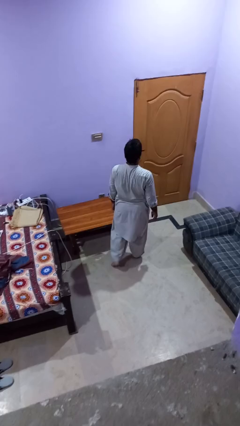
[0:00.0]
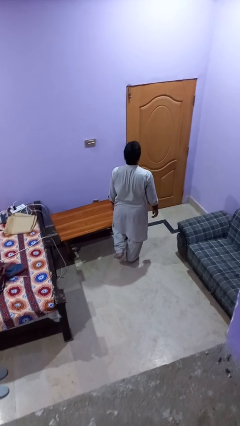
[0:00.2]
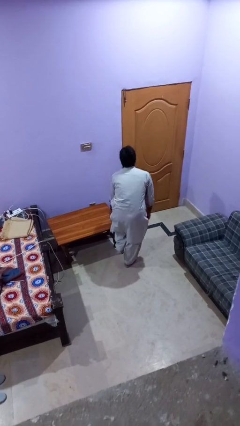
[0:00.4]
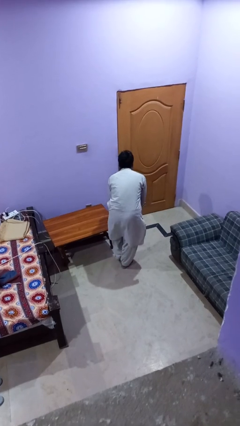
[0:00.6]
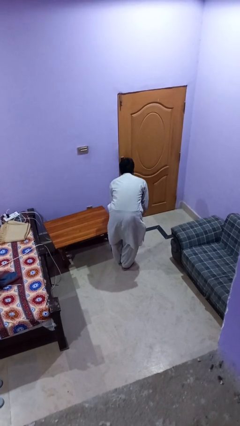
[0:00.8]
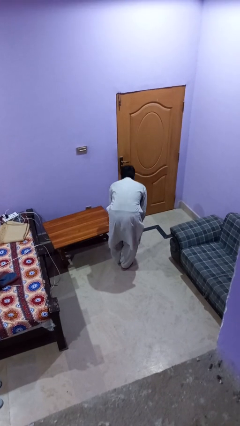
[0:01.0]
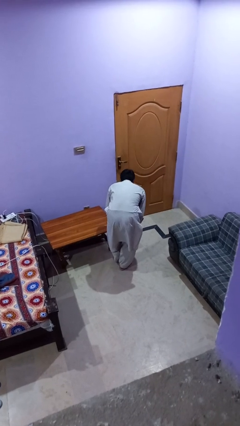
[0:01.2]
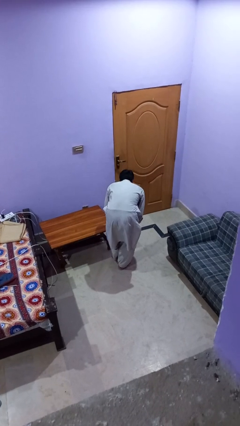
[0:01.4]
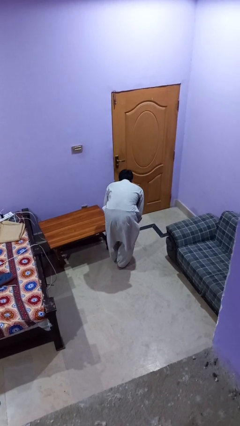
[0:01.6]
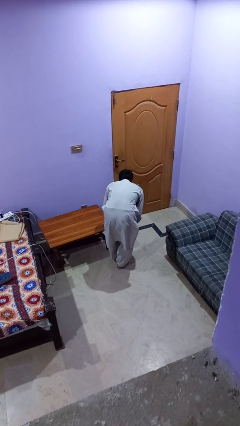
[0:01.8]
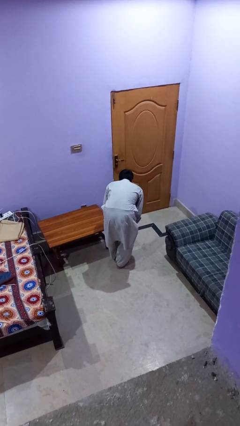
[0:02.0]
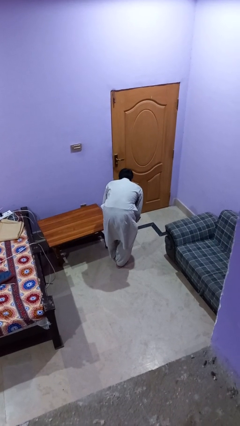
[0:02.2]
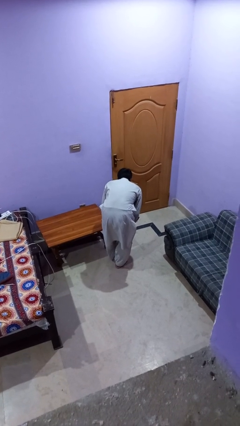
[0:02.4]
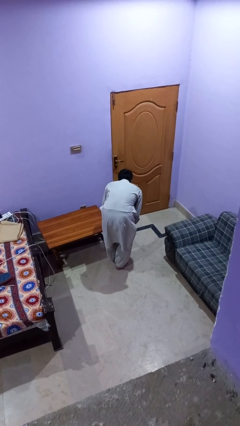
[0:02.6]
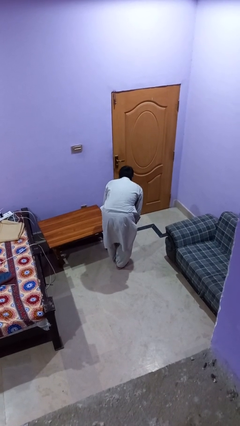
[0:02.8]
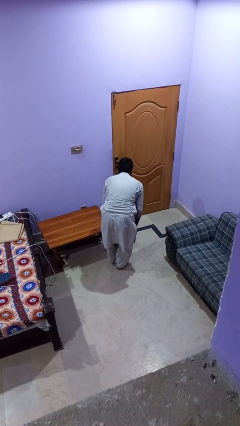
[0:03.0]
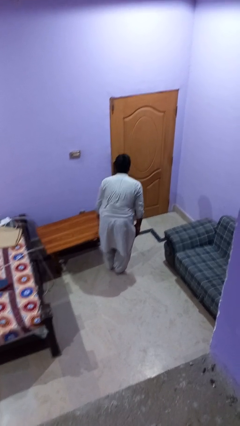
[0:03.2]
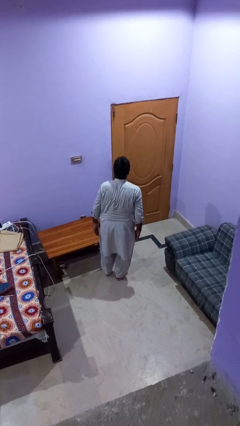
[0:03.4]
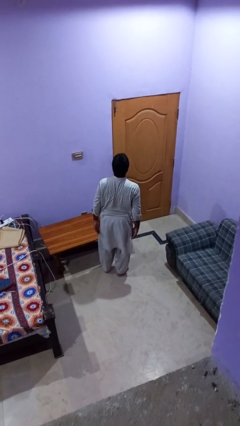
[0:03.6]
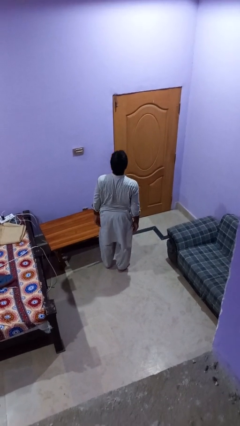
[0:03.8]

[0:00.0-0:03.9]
person bumps into table

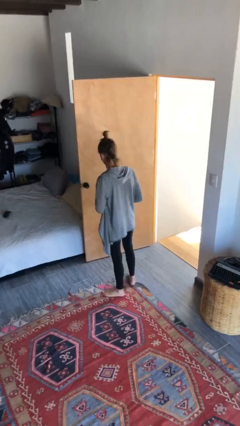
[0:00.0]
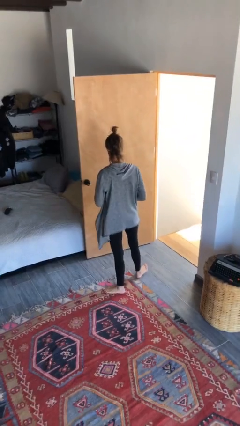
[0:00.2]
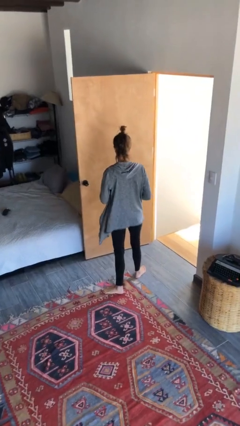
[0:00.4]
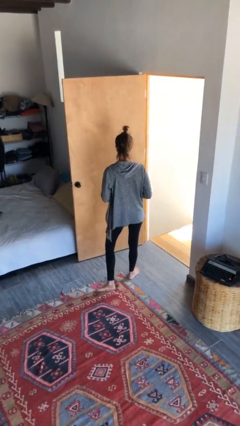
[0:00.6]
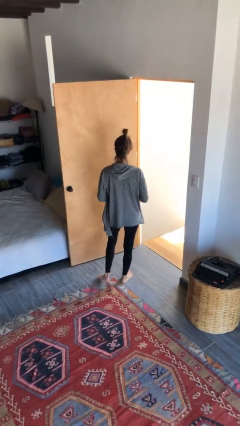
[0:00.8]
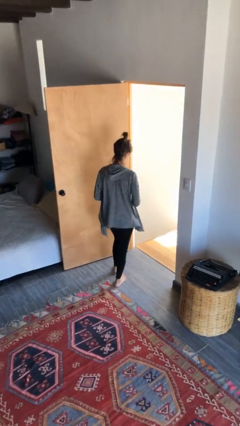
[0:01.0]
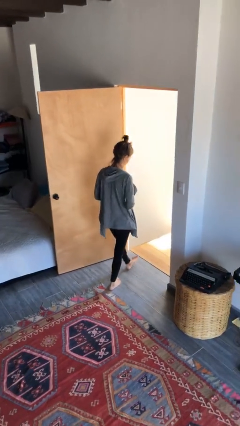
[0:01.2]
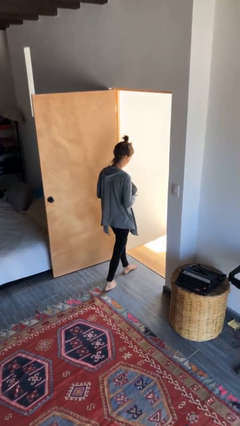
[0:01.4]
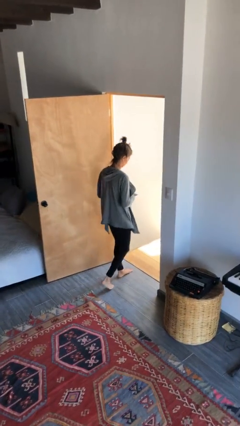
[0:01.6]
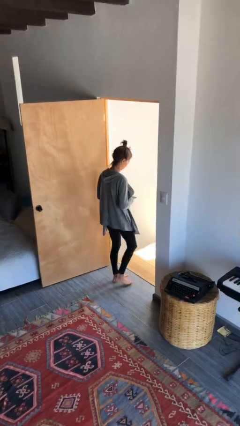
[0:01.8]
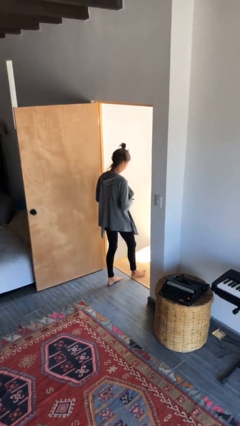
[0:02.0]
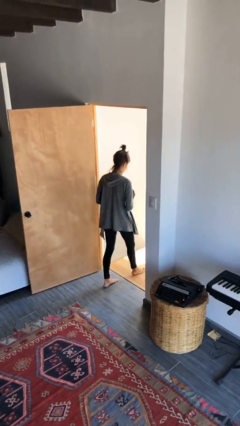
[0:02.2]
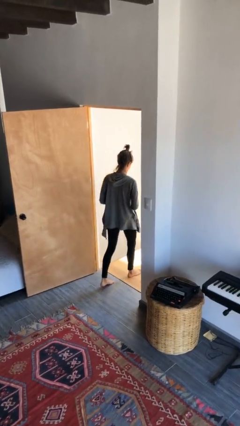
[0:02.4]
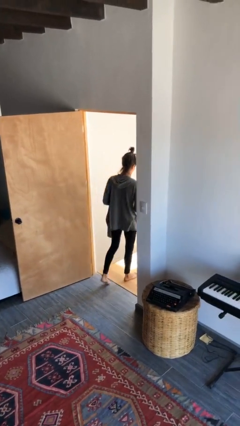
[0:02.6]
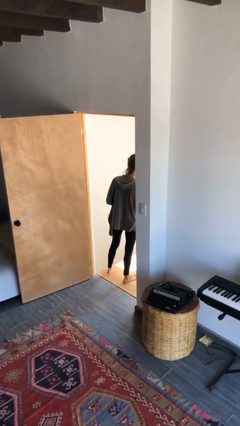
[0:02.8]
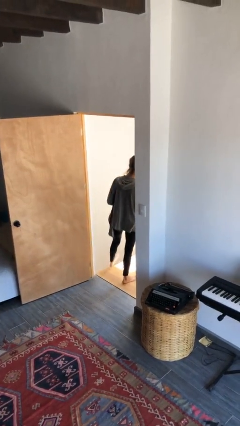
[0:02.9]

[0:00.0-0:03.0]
person exits scene through structure

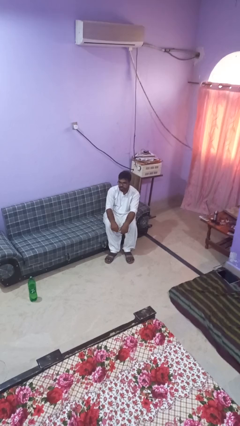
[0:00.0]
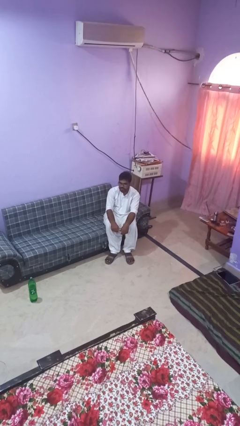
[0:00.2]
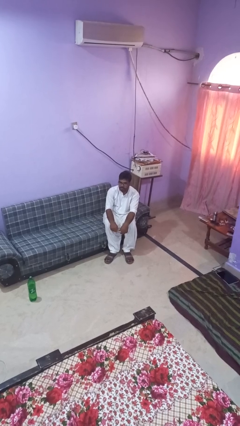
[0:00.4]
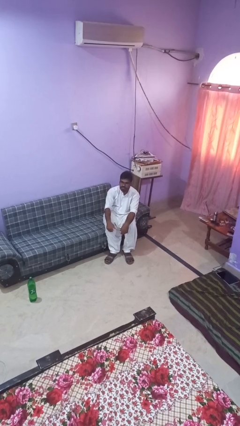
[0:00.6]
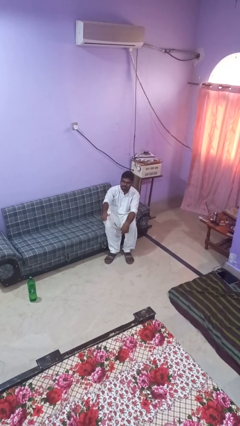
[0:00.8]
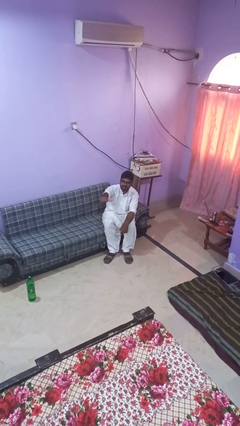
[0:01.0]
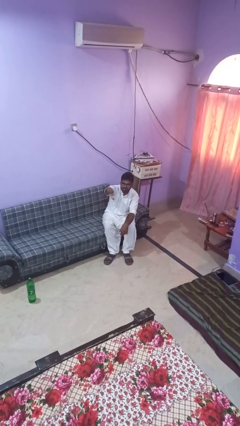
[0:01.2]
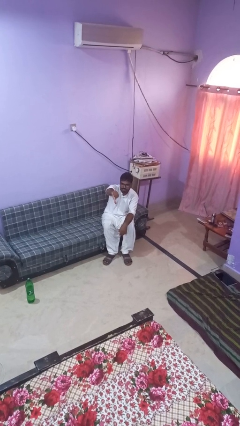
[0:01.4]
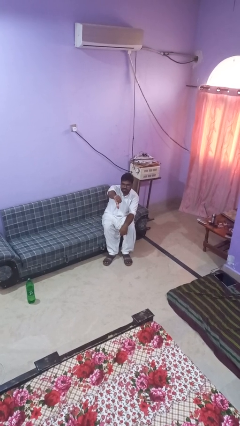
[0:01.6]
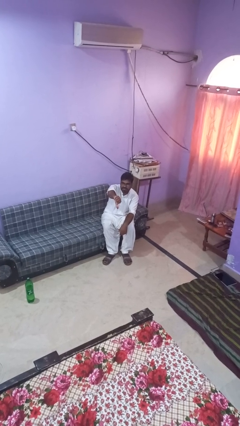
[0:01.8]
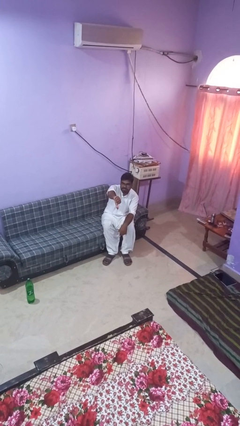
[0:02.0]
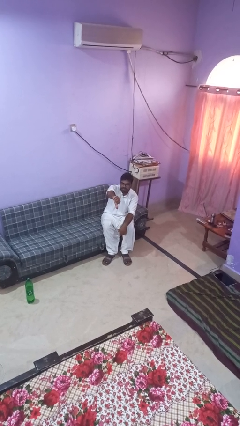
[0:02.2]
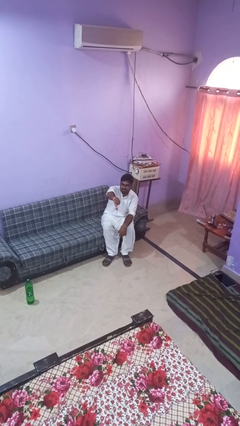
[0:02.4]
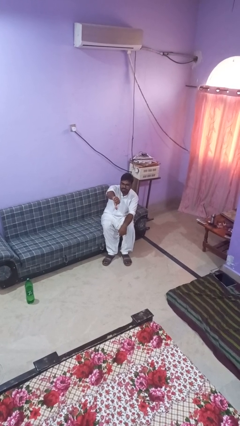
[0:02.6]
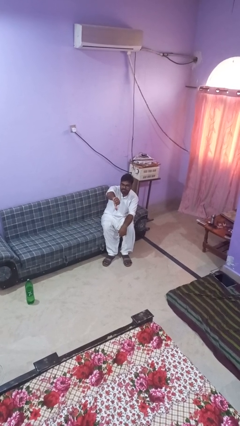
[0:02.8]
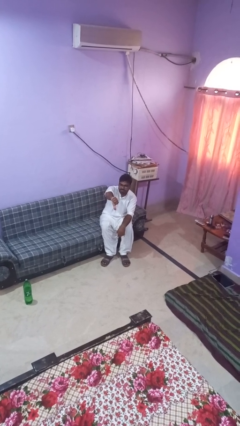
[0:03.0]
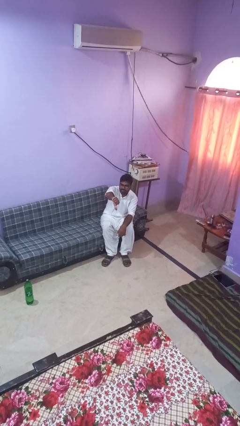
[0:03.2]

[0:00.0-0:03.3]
person gestures thumbs down

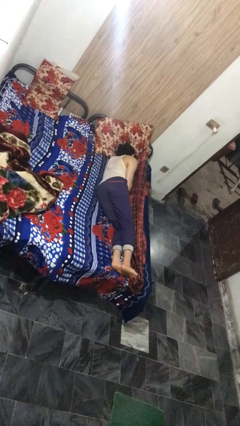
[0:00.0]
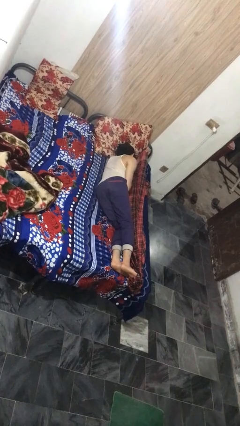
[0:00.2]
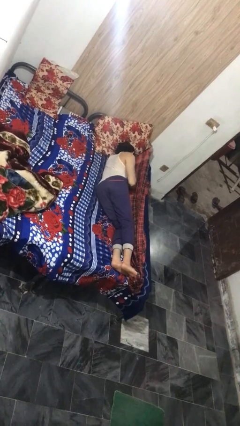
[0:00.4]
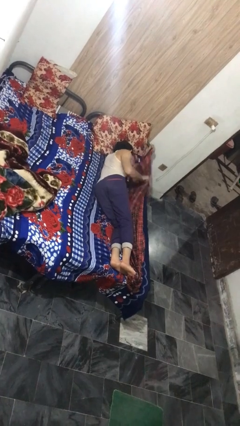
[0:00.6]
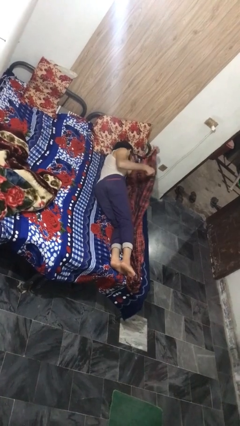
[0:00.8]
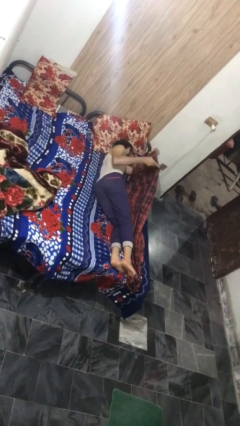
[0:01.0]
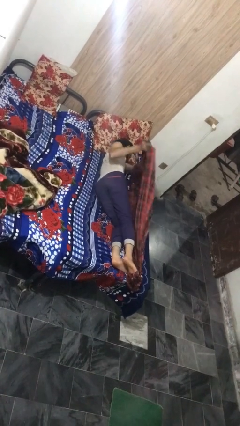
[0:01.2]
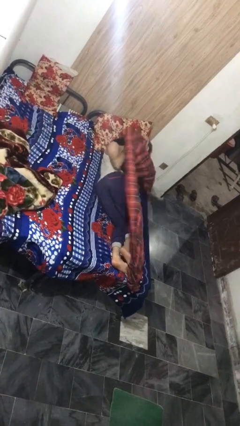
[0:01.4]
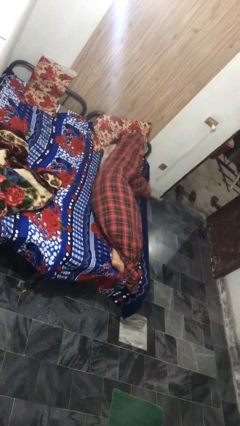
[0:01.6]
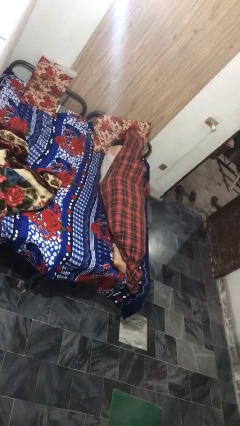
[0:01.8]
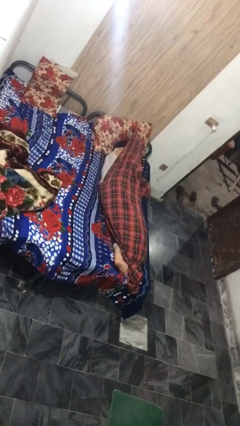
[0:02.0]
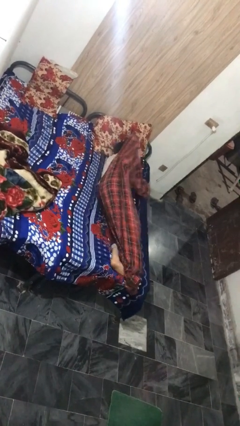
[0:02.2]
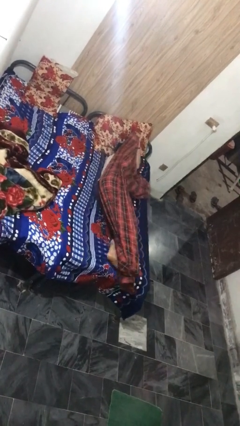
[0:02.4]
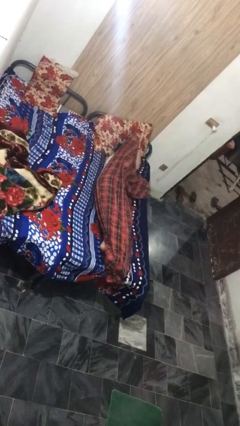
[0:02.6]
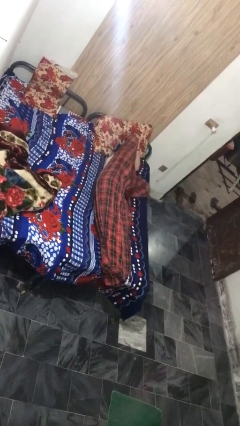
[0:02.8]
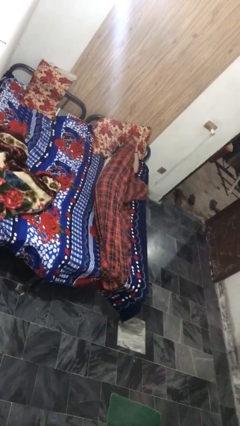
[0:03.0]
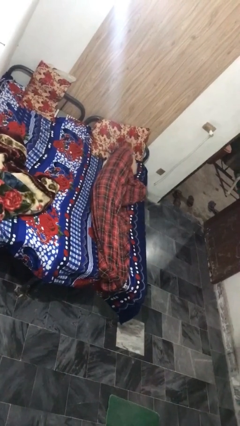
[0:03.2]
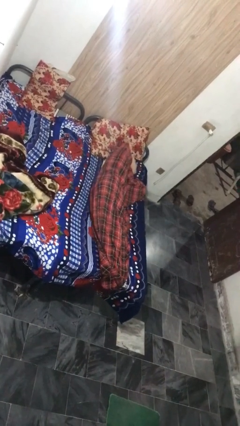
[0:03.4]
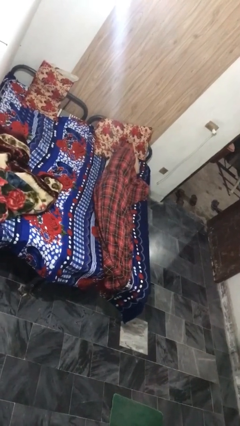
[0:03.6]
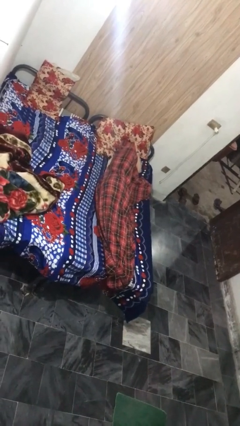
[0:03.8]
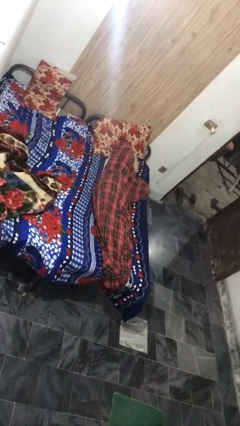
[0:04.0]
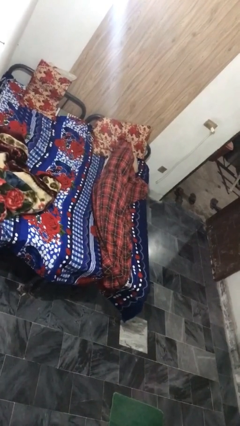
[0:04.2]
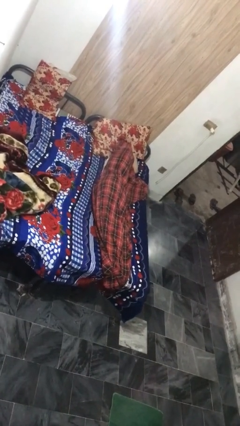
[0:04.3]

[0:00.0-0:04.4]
person covers with bedsheets

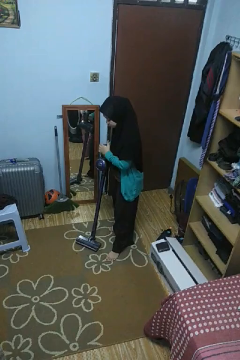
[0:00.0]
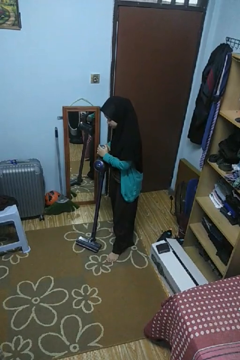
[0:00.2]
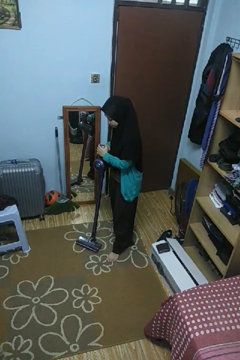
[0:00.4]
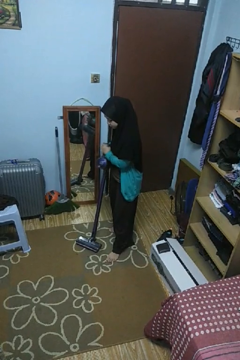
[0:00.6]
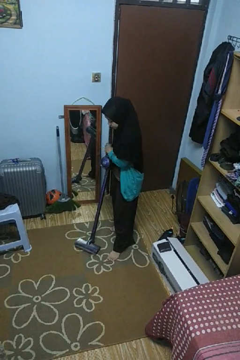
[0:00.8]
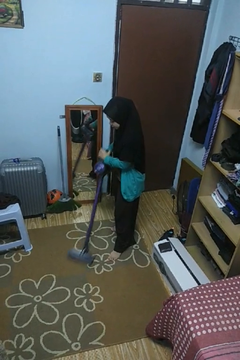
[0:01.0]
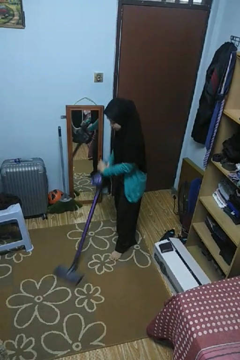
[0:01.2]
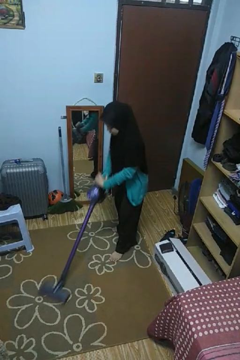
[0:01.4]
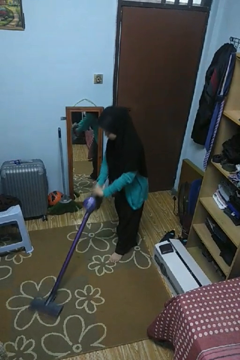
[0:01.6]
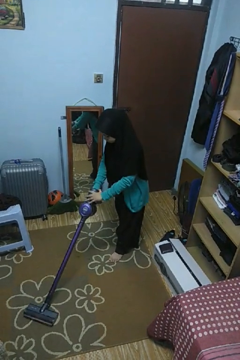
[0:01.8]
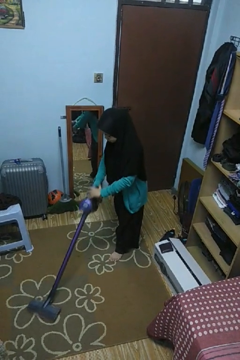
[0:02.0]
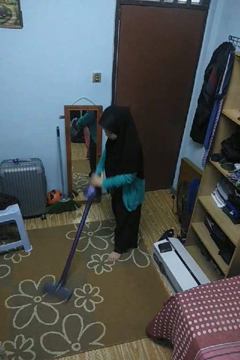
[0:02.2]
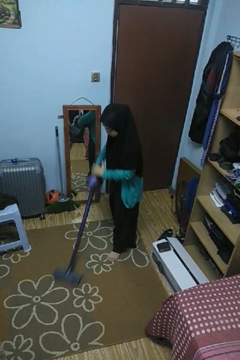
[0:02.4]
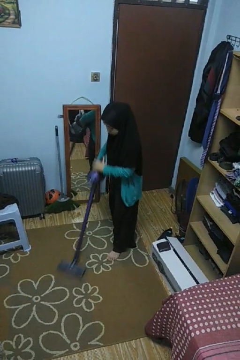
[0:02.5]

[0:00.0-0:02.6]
person vacuums carpet

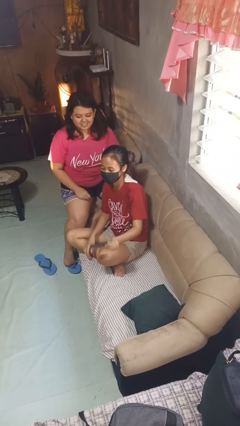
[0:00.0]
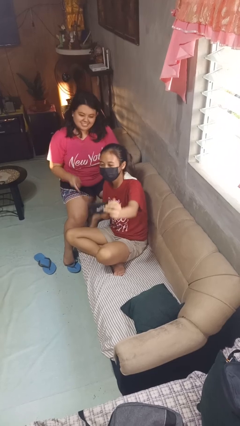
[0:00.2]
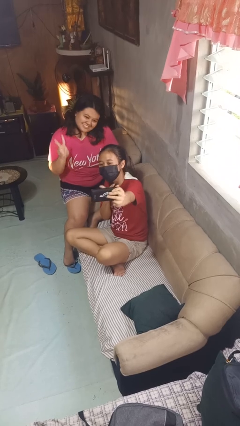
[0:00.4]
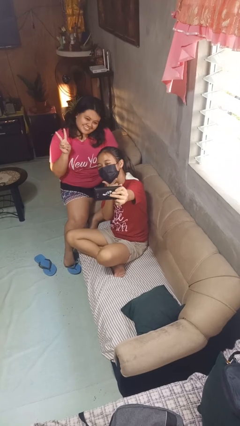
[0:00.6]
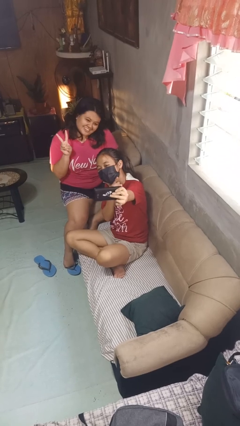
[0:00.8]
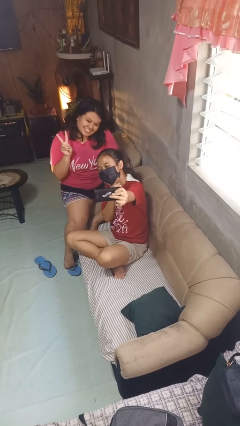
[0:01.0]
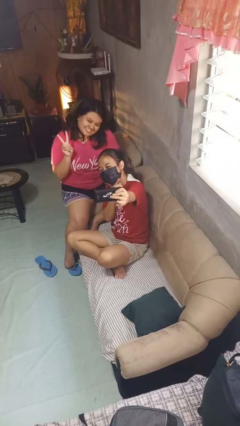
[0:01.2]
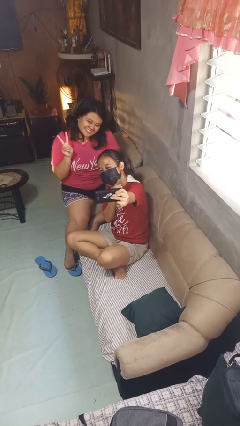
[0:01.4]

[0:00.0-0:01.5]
person takes selfie with person
